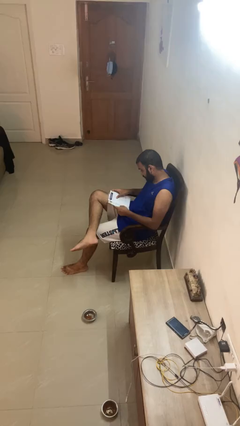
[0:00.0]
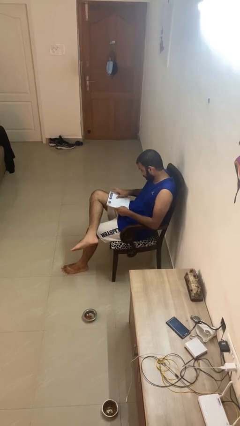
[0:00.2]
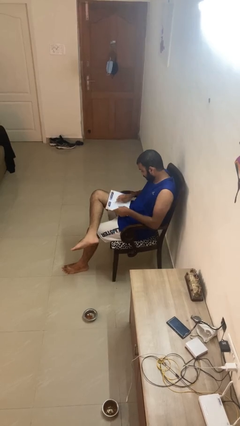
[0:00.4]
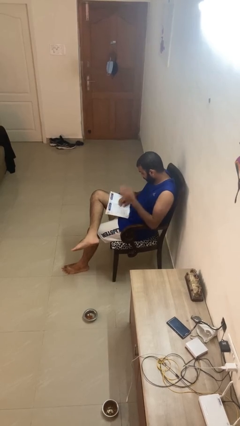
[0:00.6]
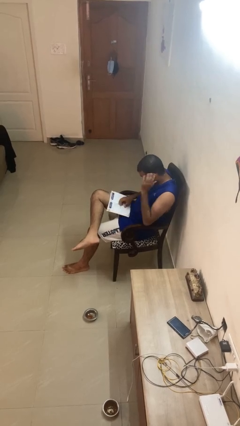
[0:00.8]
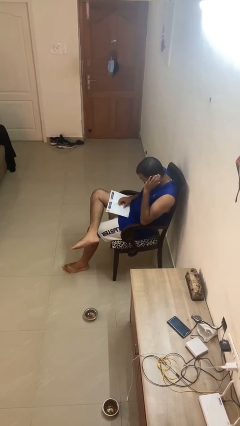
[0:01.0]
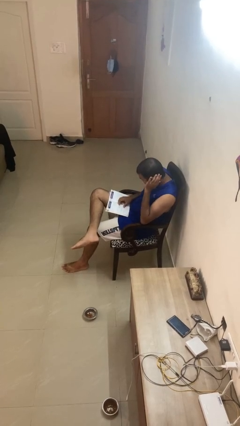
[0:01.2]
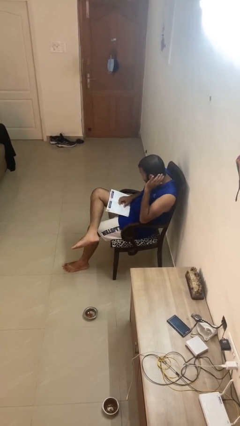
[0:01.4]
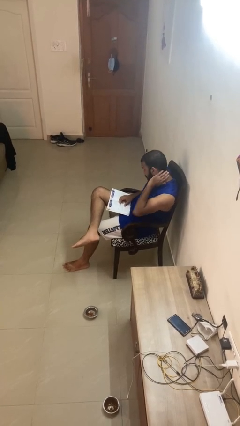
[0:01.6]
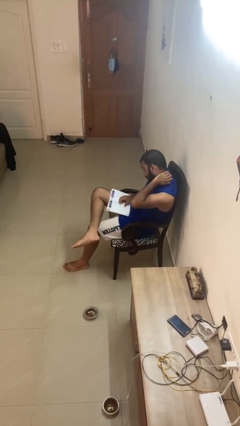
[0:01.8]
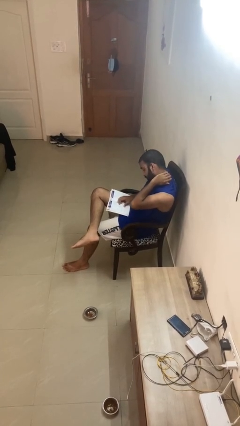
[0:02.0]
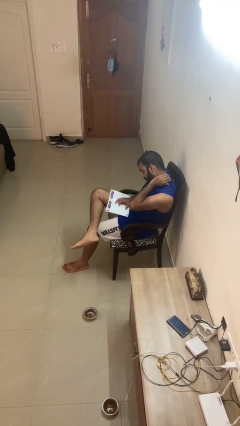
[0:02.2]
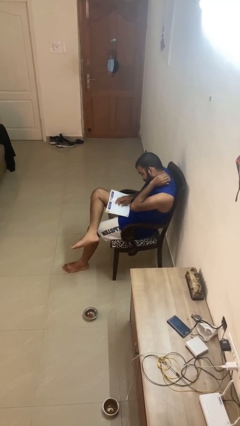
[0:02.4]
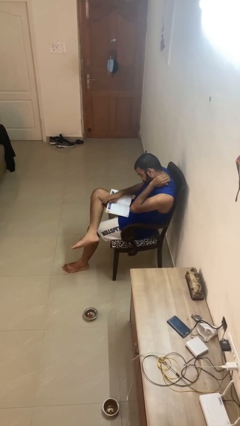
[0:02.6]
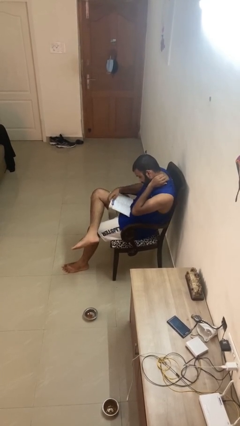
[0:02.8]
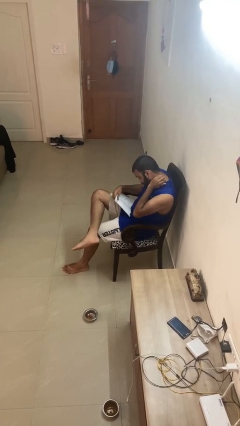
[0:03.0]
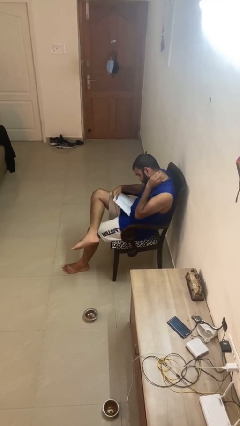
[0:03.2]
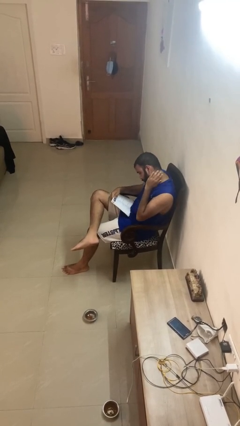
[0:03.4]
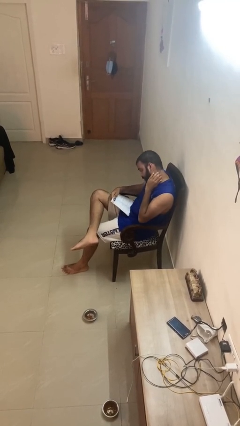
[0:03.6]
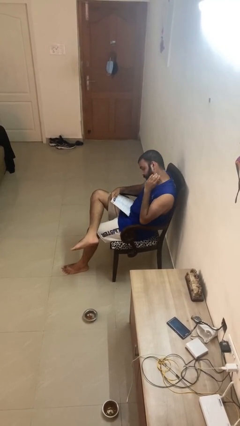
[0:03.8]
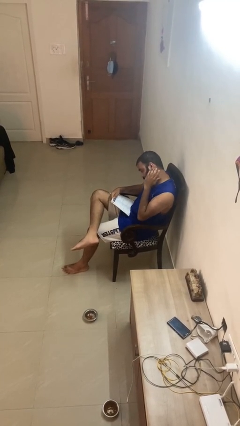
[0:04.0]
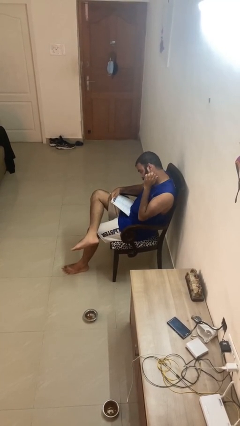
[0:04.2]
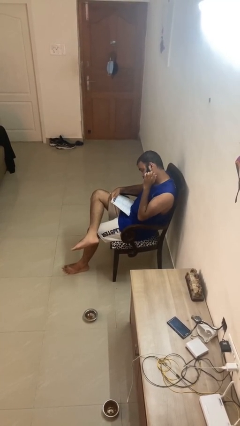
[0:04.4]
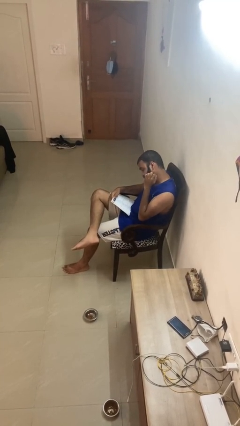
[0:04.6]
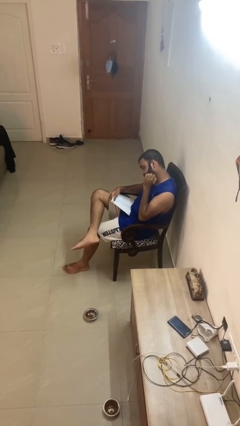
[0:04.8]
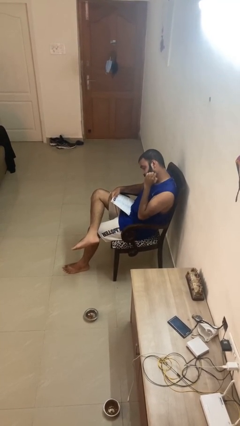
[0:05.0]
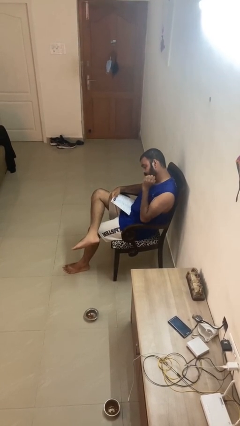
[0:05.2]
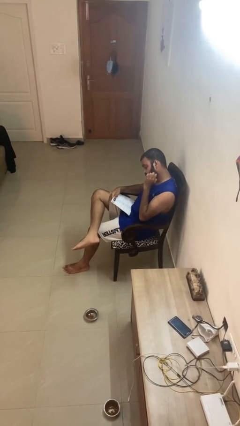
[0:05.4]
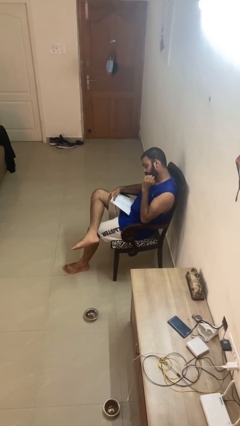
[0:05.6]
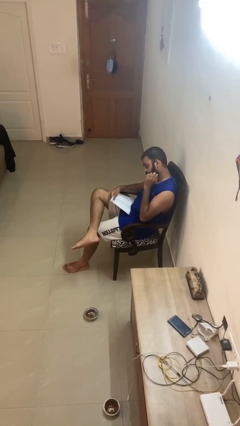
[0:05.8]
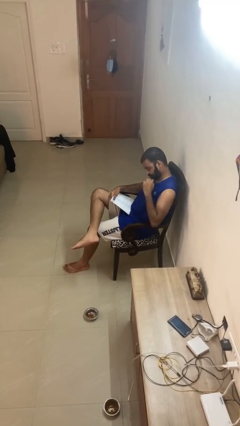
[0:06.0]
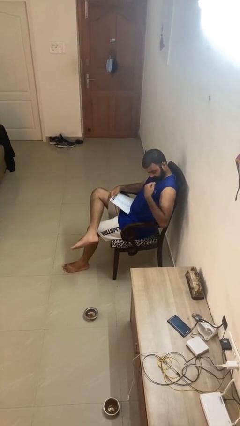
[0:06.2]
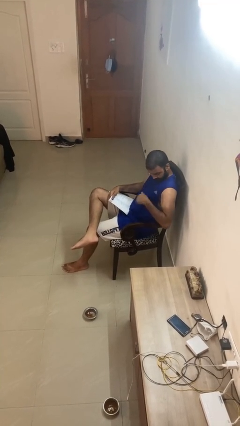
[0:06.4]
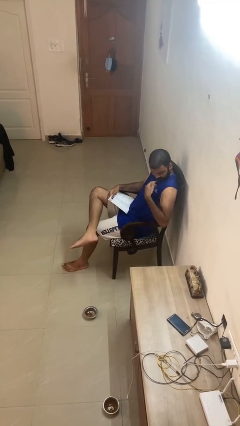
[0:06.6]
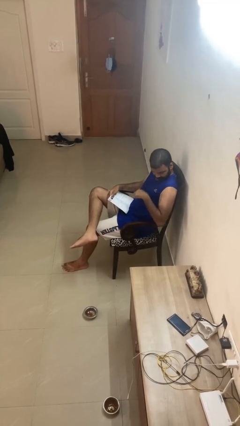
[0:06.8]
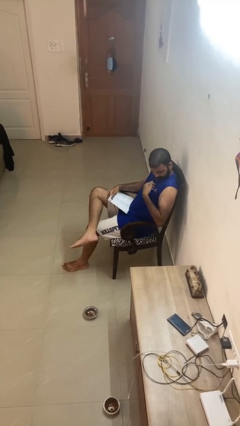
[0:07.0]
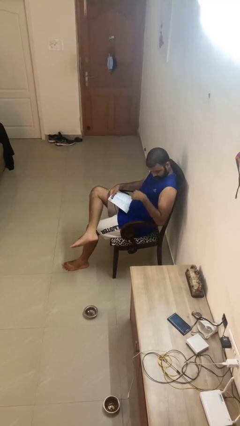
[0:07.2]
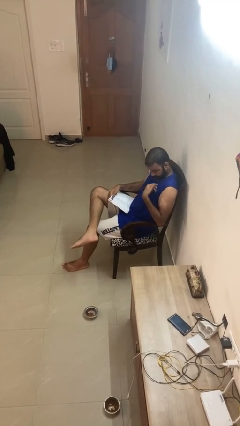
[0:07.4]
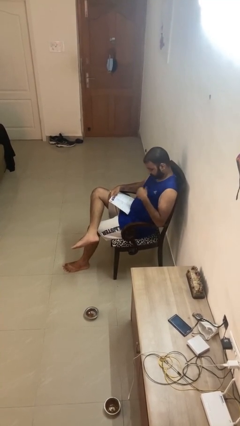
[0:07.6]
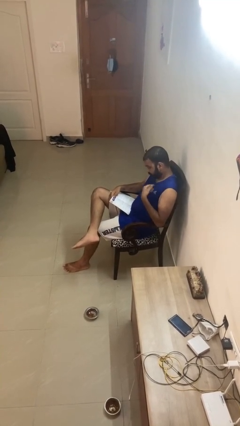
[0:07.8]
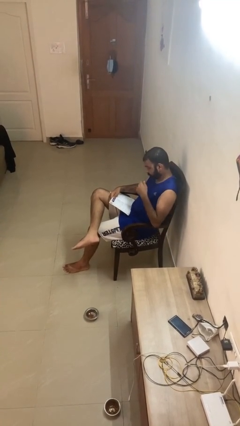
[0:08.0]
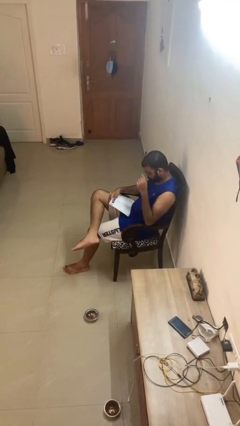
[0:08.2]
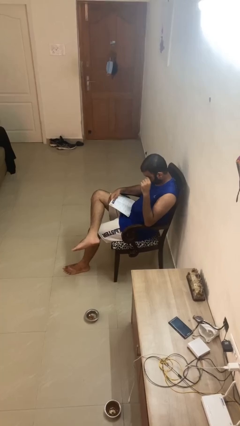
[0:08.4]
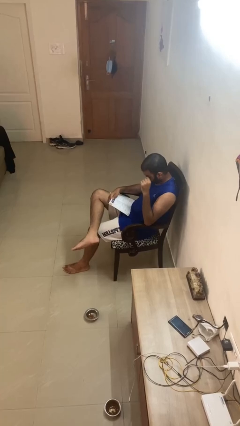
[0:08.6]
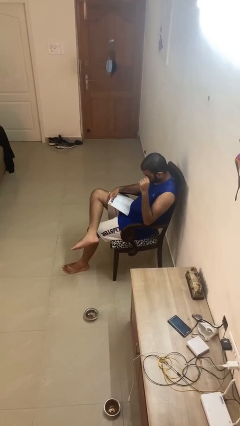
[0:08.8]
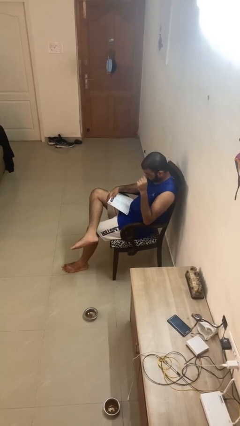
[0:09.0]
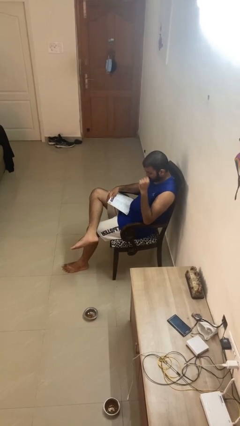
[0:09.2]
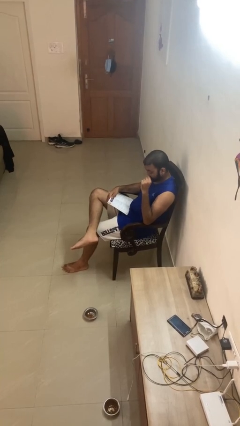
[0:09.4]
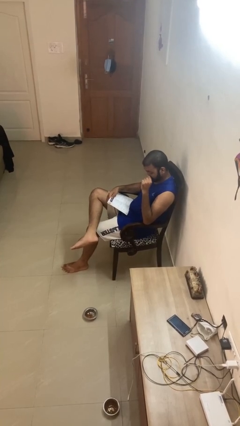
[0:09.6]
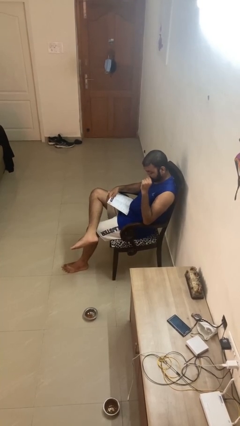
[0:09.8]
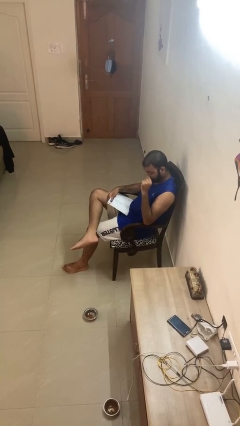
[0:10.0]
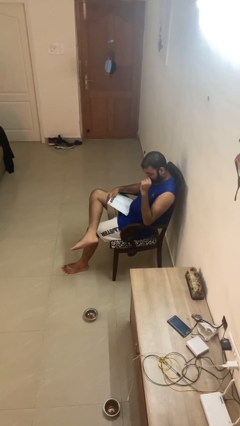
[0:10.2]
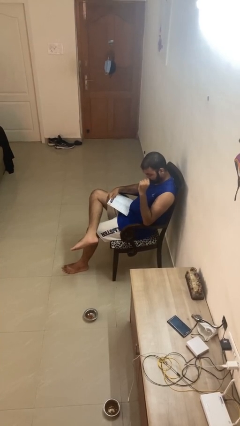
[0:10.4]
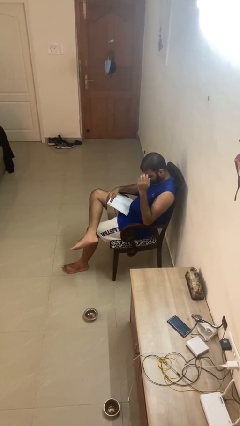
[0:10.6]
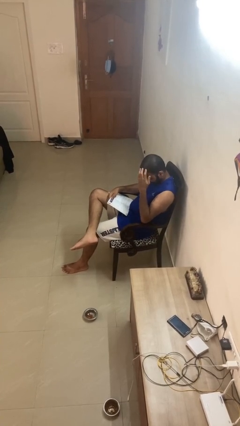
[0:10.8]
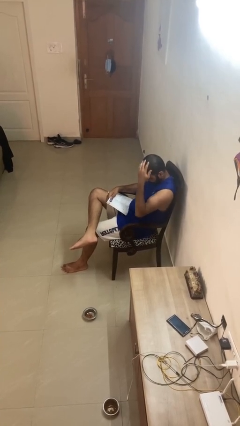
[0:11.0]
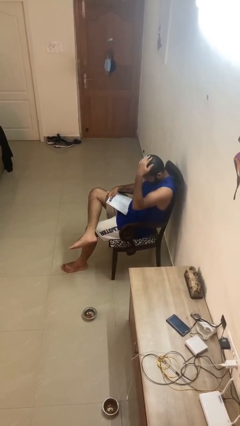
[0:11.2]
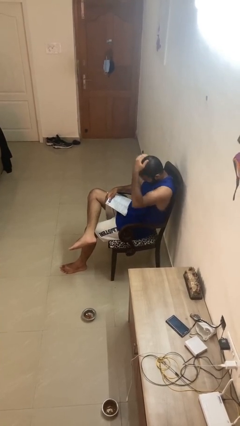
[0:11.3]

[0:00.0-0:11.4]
person reads document

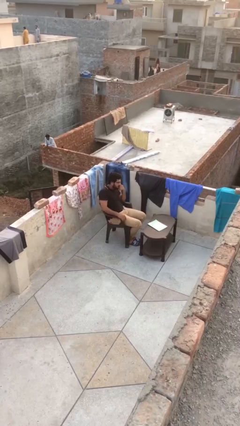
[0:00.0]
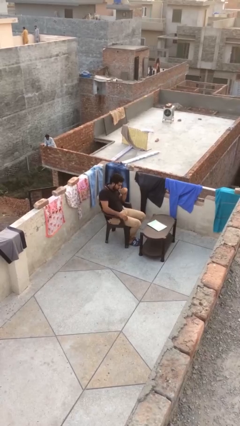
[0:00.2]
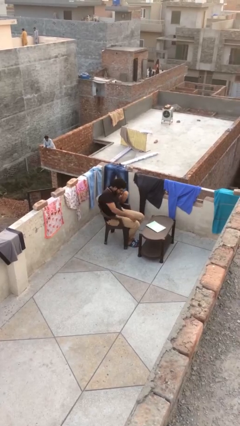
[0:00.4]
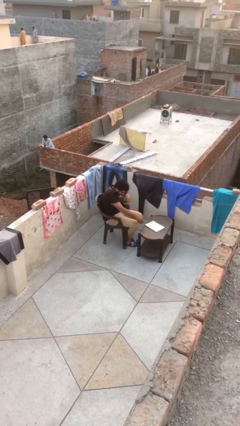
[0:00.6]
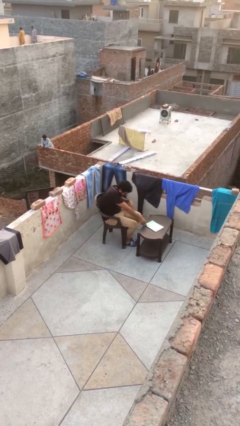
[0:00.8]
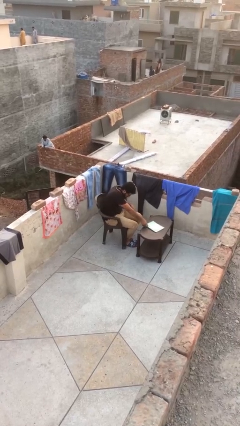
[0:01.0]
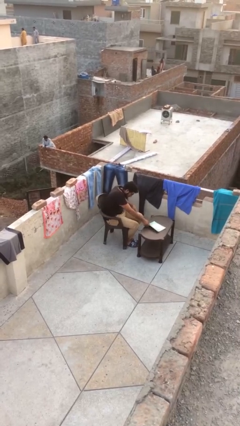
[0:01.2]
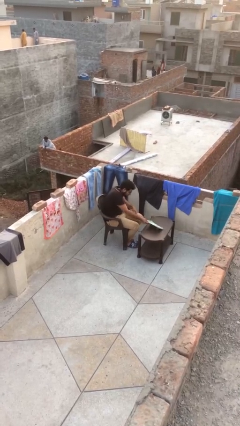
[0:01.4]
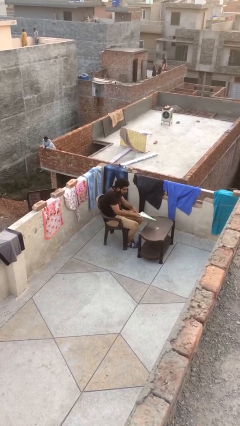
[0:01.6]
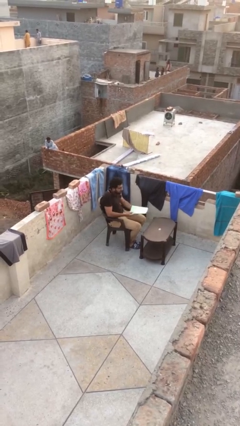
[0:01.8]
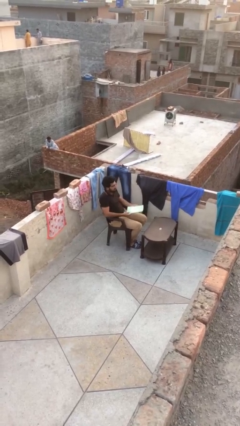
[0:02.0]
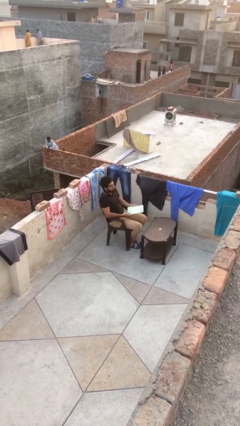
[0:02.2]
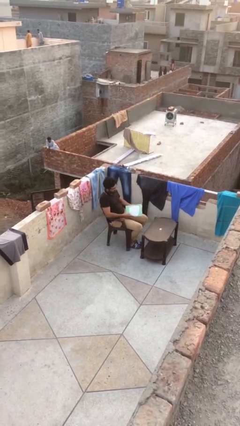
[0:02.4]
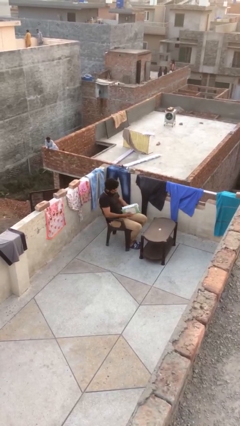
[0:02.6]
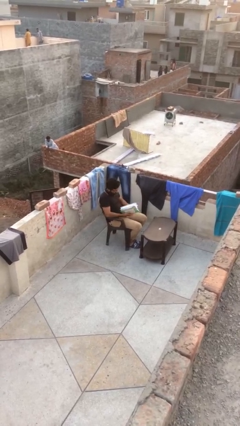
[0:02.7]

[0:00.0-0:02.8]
person picks up object from table

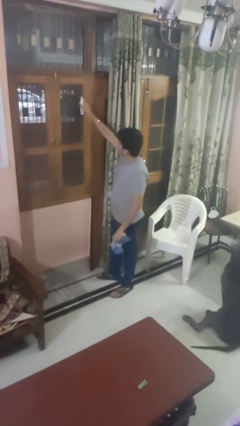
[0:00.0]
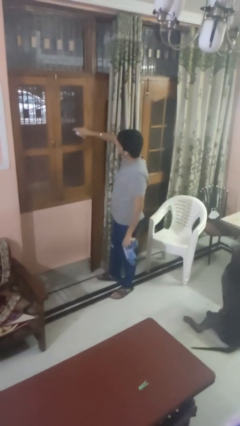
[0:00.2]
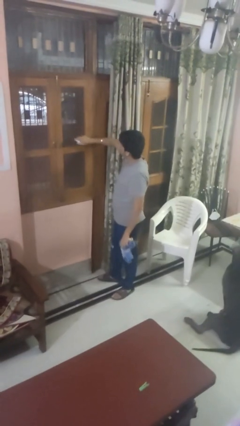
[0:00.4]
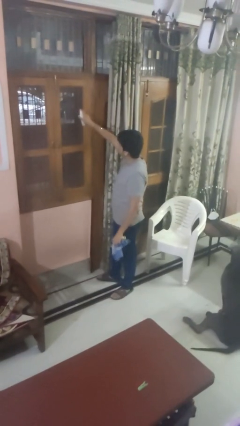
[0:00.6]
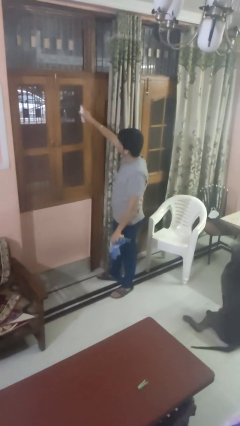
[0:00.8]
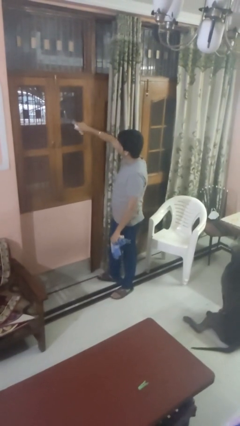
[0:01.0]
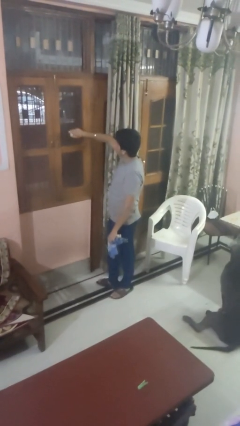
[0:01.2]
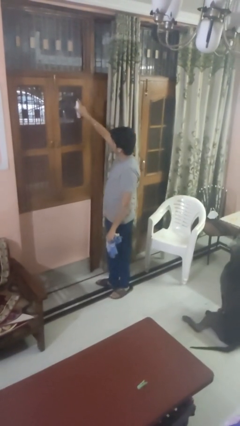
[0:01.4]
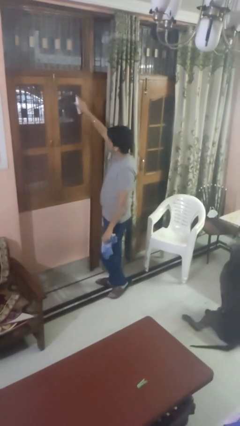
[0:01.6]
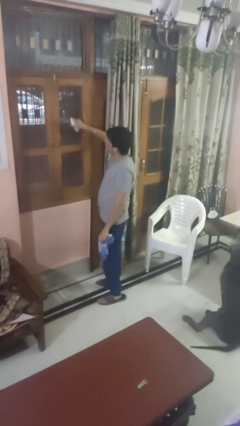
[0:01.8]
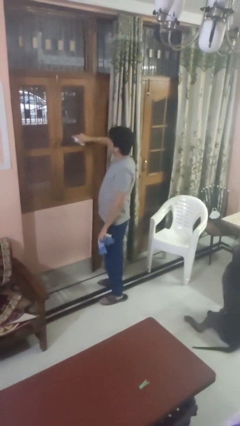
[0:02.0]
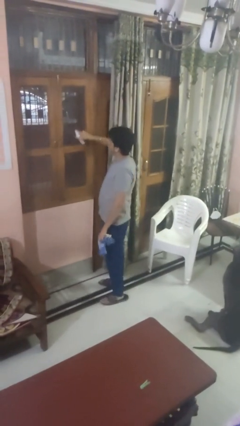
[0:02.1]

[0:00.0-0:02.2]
person sprays from bottle

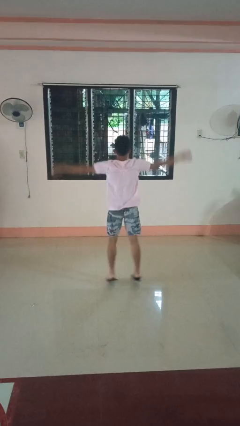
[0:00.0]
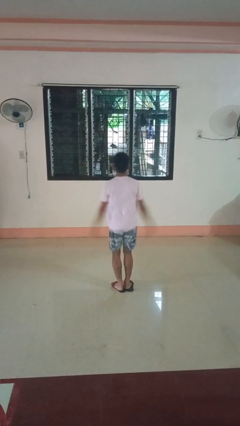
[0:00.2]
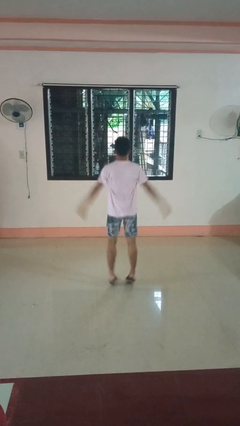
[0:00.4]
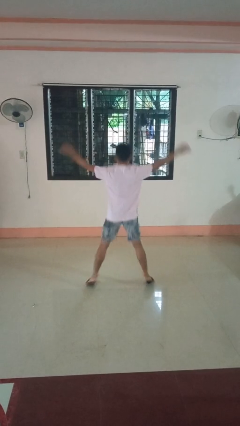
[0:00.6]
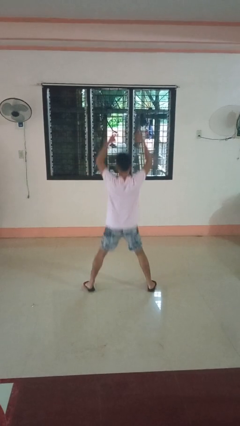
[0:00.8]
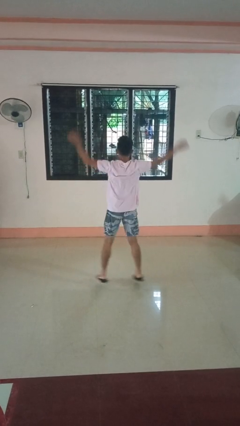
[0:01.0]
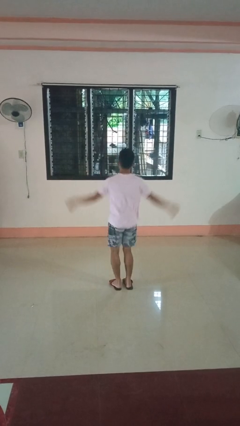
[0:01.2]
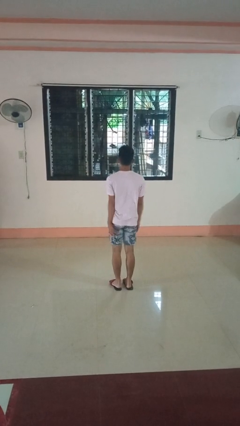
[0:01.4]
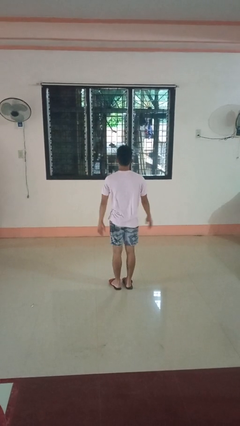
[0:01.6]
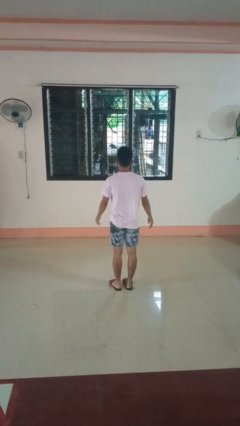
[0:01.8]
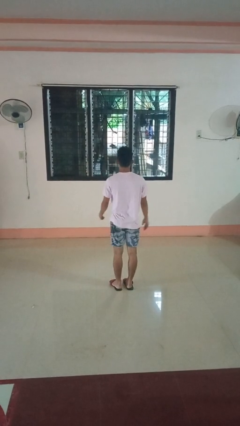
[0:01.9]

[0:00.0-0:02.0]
person exercises with jumping jacks
